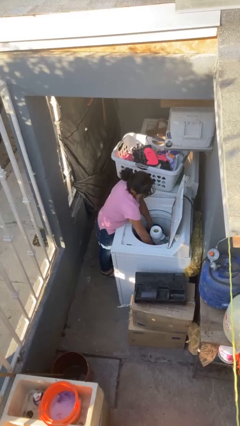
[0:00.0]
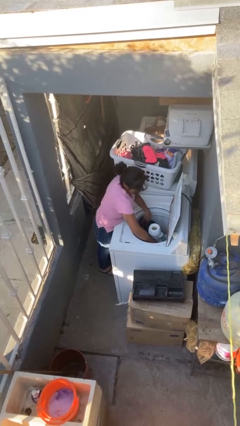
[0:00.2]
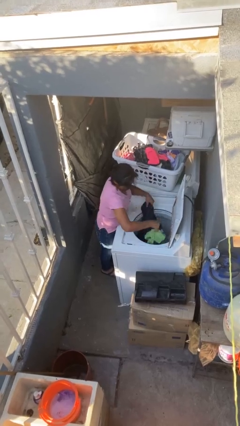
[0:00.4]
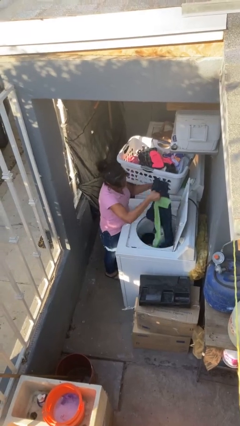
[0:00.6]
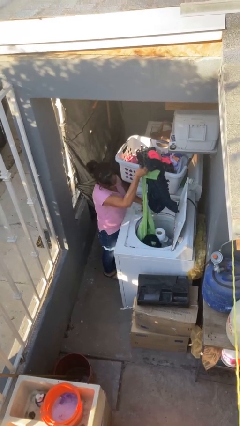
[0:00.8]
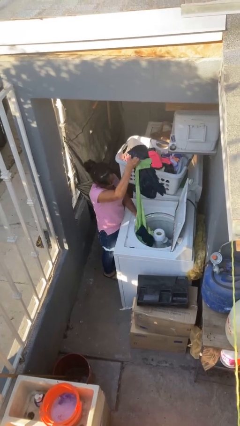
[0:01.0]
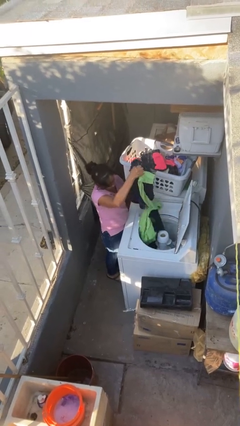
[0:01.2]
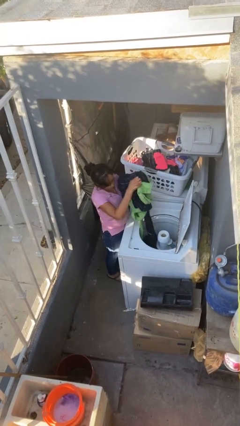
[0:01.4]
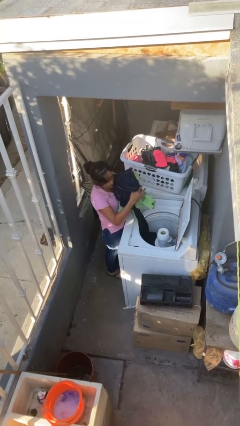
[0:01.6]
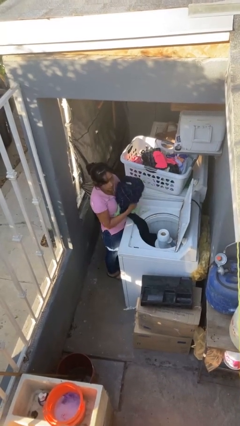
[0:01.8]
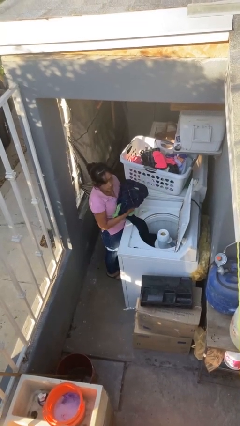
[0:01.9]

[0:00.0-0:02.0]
person loads clotheswasher

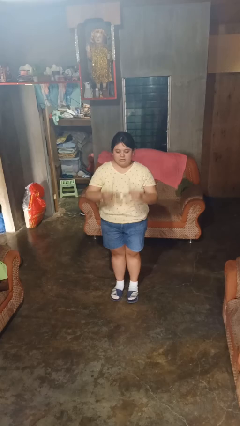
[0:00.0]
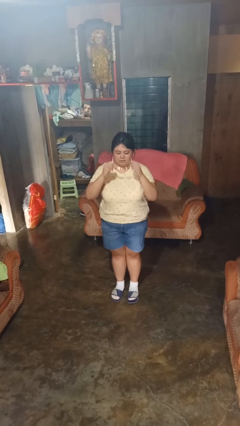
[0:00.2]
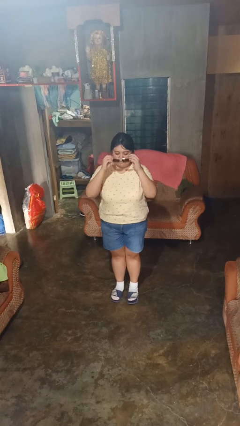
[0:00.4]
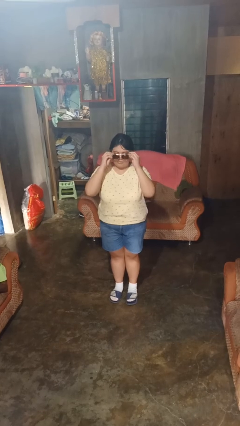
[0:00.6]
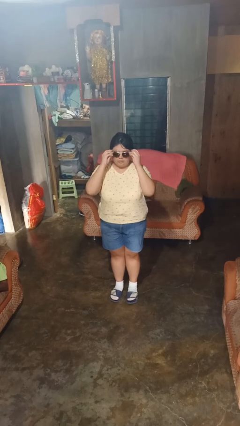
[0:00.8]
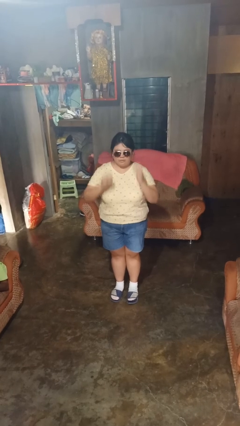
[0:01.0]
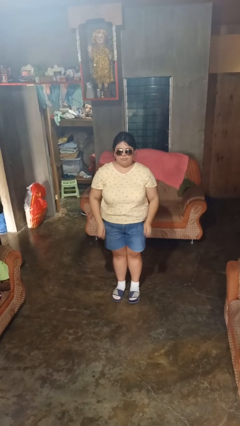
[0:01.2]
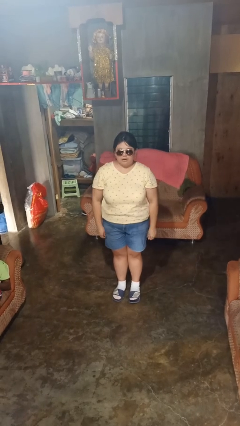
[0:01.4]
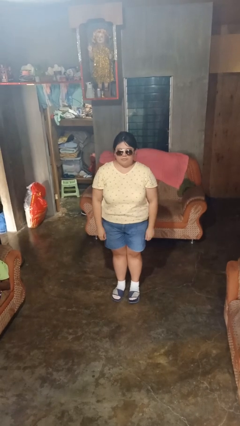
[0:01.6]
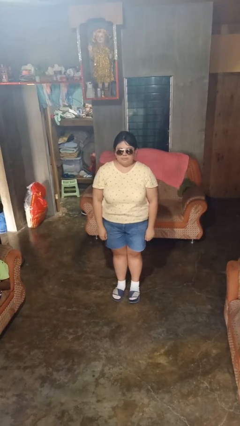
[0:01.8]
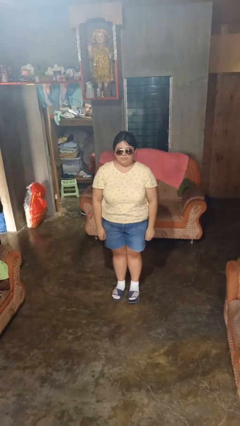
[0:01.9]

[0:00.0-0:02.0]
person puts on sunglasses

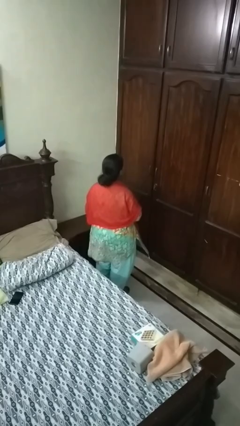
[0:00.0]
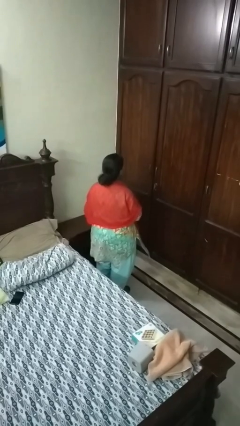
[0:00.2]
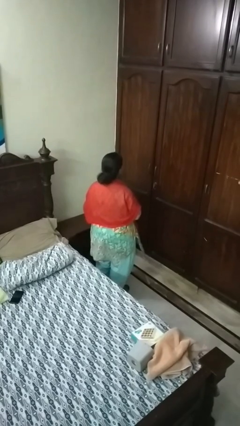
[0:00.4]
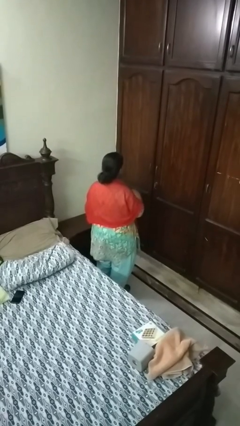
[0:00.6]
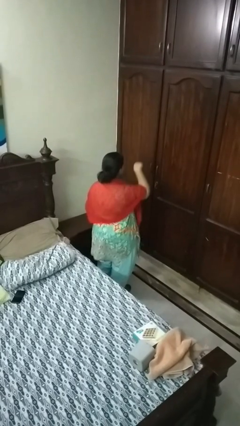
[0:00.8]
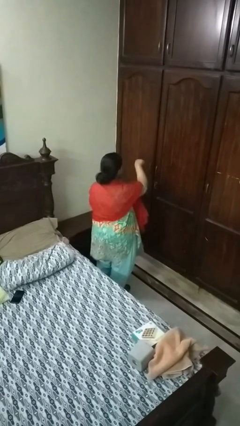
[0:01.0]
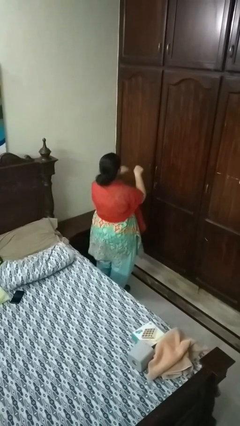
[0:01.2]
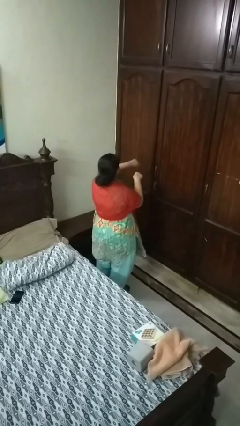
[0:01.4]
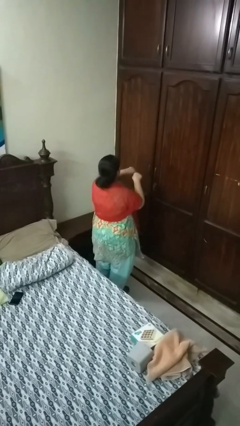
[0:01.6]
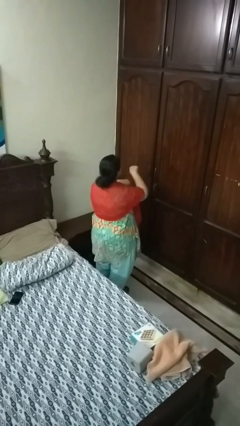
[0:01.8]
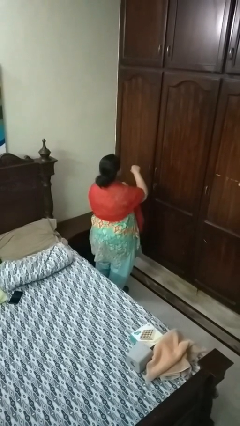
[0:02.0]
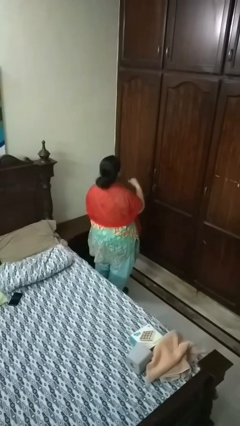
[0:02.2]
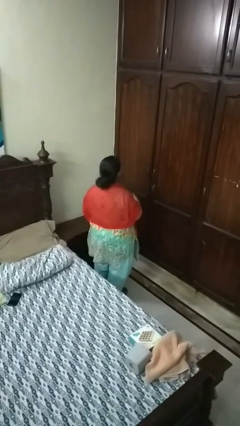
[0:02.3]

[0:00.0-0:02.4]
person punches

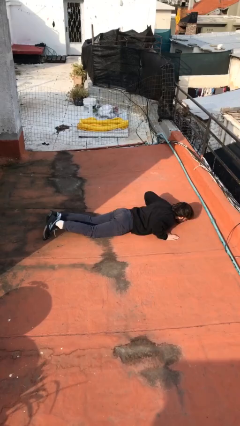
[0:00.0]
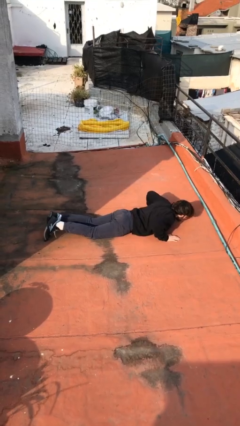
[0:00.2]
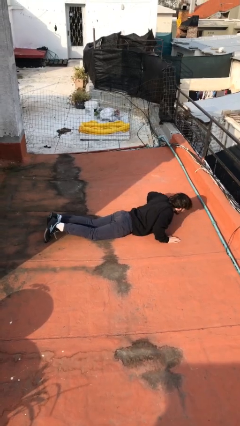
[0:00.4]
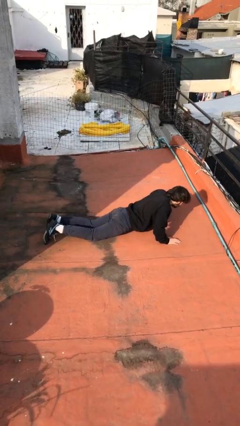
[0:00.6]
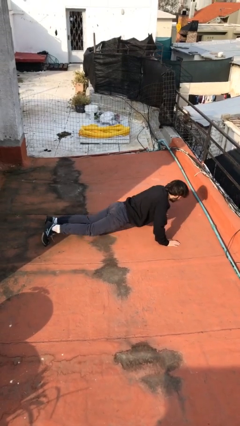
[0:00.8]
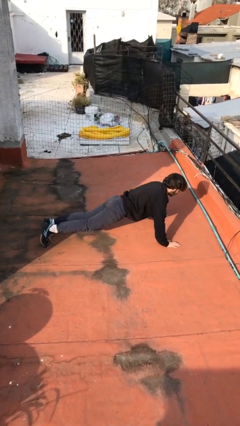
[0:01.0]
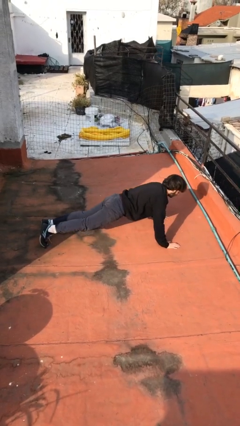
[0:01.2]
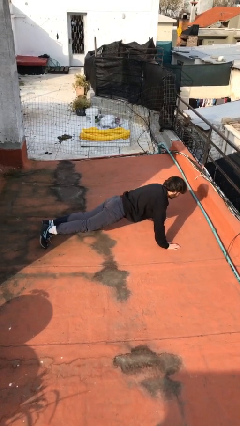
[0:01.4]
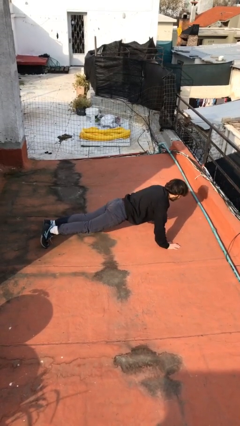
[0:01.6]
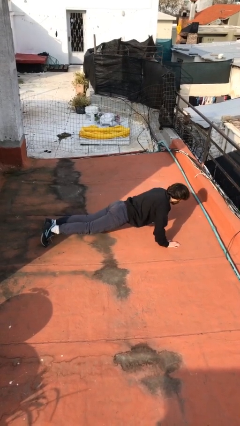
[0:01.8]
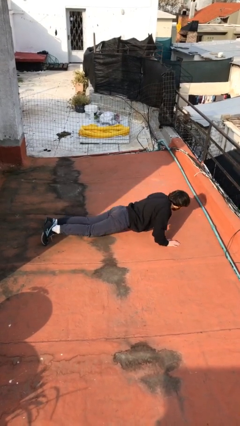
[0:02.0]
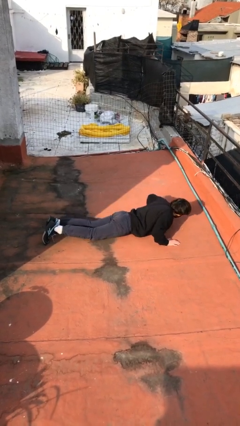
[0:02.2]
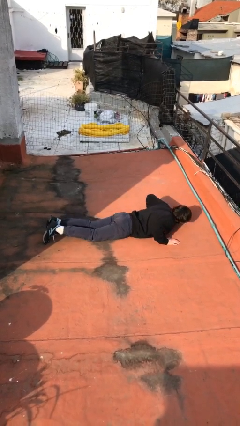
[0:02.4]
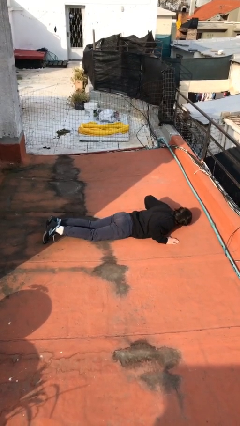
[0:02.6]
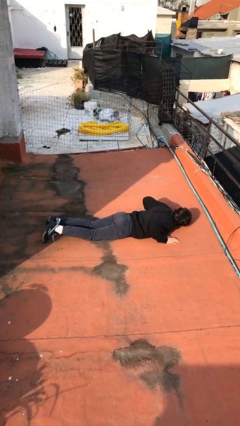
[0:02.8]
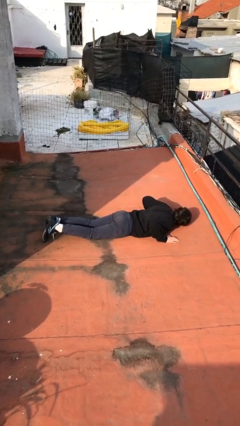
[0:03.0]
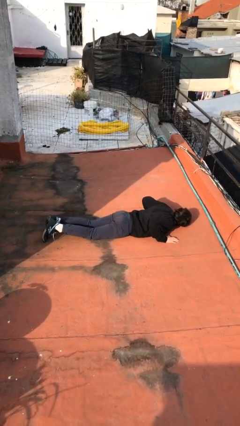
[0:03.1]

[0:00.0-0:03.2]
person exercises with pushup

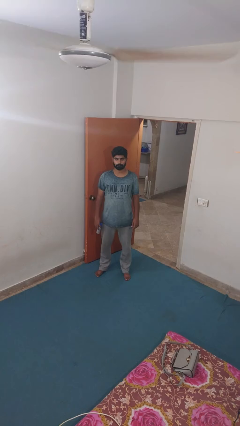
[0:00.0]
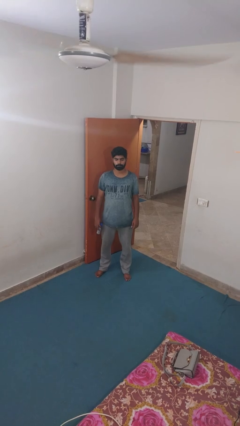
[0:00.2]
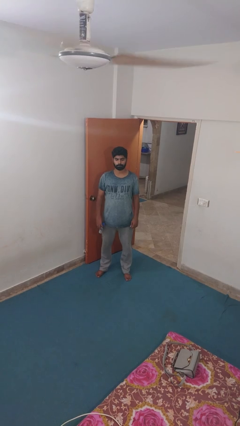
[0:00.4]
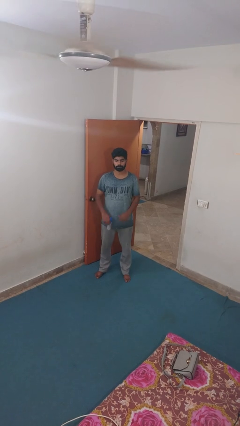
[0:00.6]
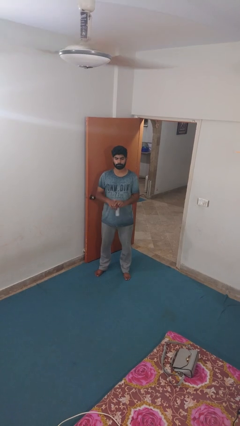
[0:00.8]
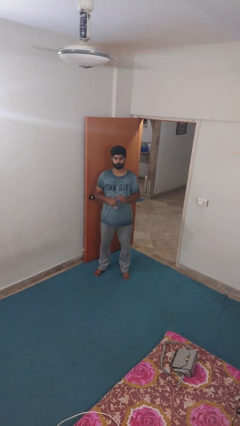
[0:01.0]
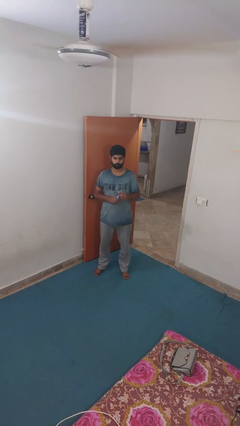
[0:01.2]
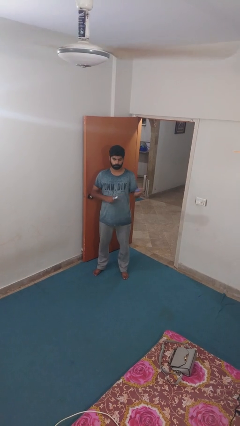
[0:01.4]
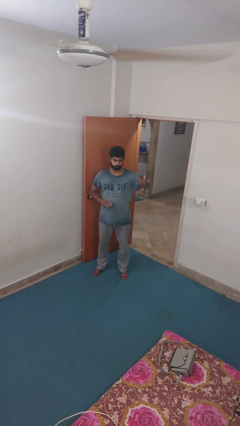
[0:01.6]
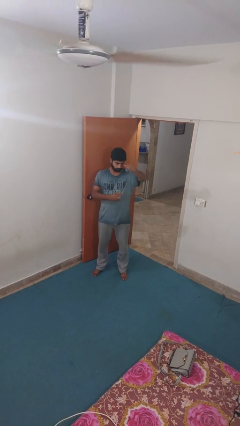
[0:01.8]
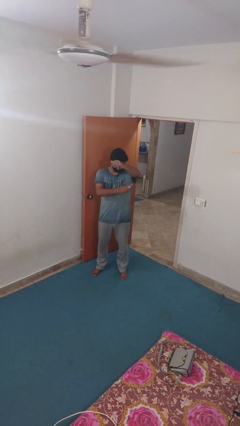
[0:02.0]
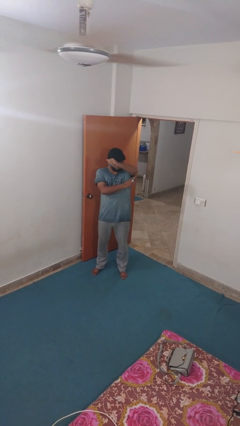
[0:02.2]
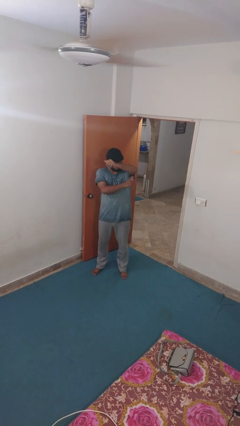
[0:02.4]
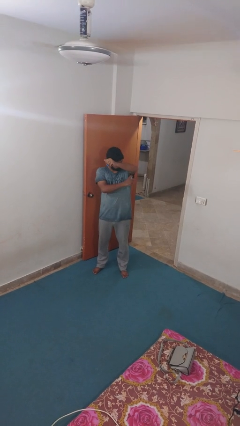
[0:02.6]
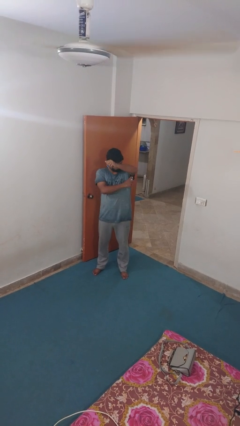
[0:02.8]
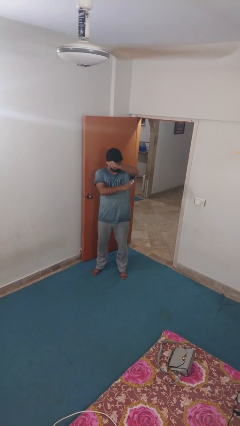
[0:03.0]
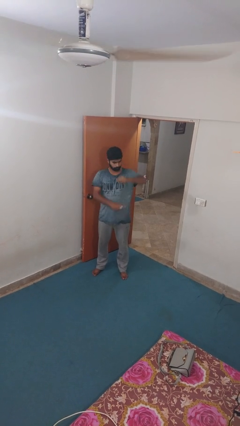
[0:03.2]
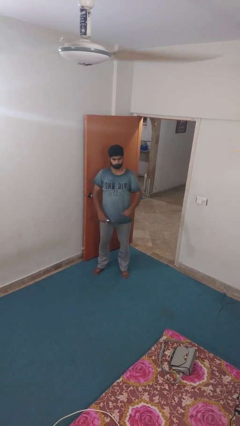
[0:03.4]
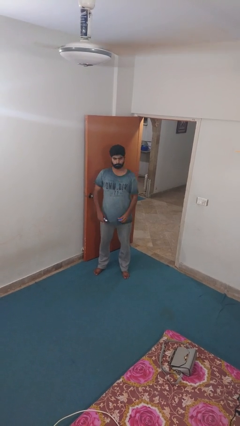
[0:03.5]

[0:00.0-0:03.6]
person applies deodorant

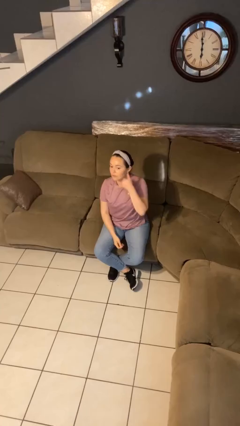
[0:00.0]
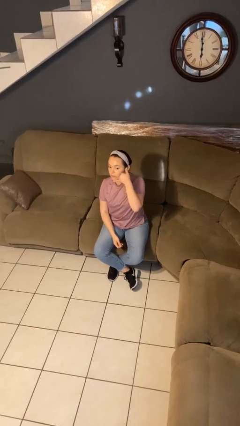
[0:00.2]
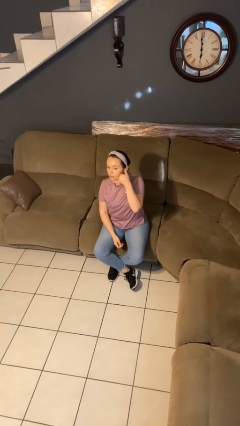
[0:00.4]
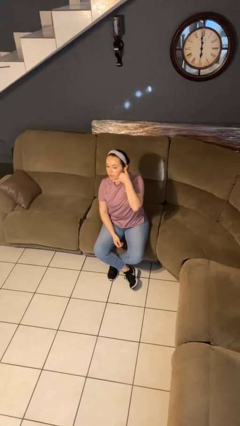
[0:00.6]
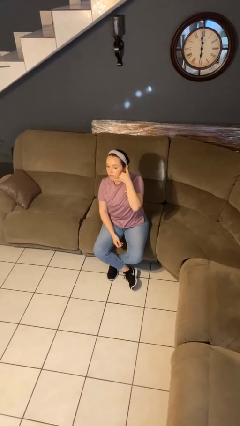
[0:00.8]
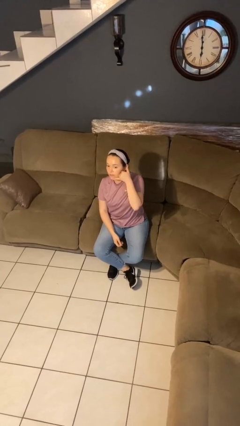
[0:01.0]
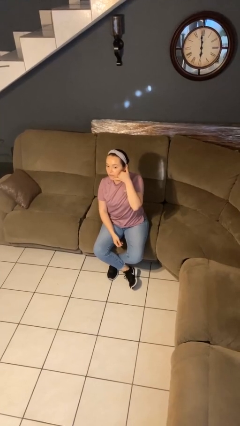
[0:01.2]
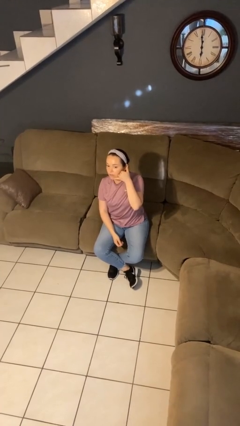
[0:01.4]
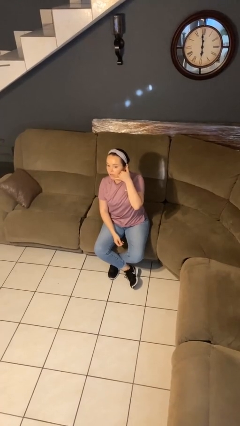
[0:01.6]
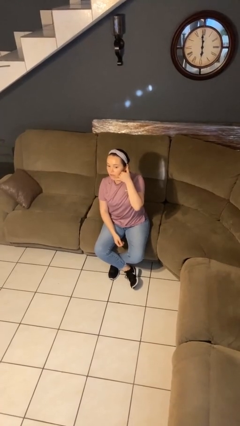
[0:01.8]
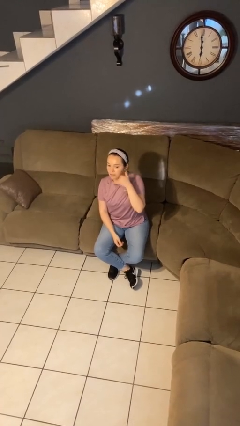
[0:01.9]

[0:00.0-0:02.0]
person gestures call me

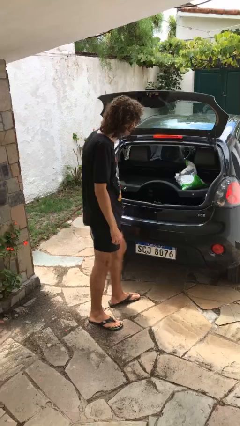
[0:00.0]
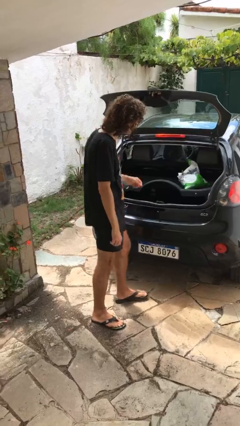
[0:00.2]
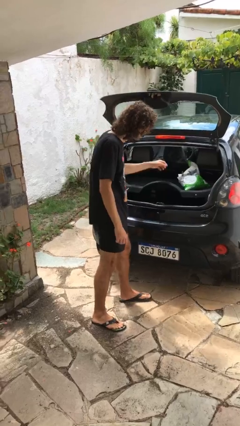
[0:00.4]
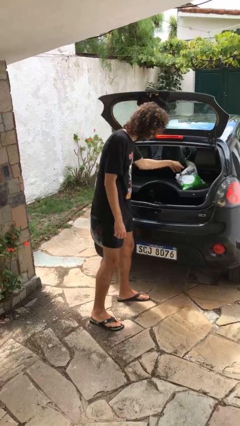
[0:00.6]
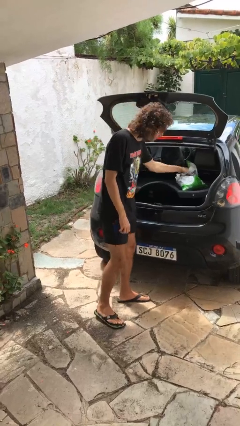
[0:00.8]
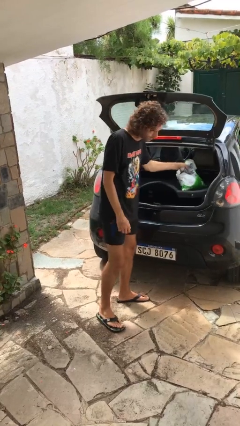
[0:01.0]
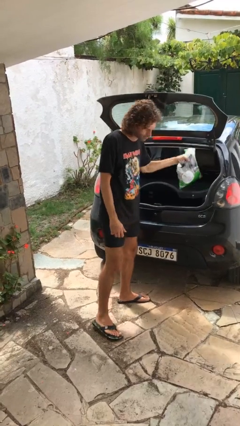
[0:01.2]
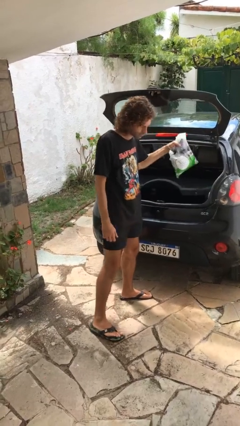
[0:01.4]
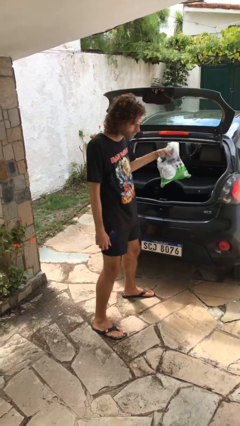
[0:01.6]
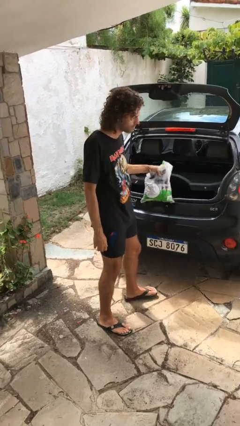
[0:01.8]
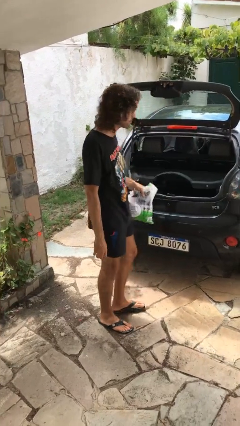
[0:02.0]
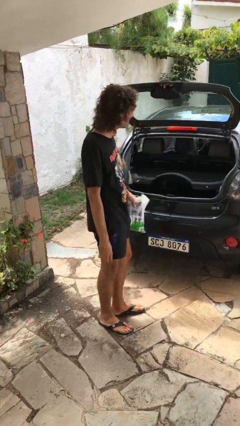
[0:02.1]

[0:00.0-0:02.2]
person unloads car
